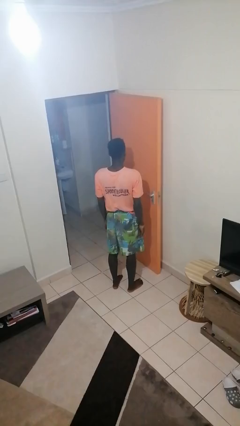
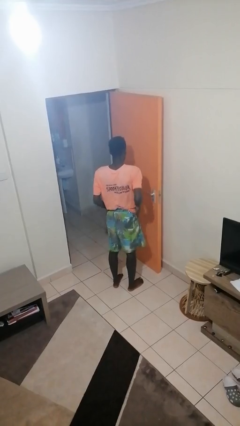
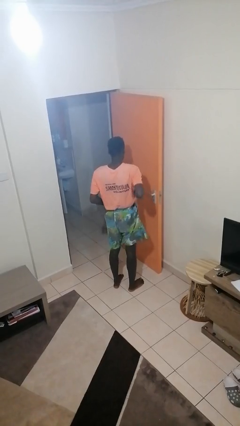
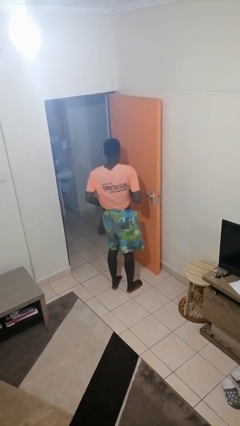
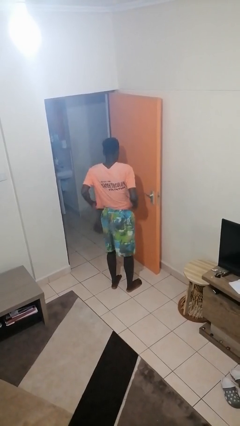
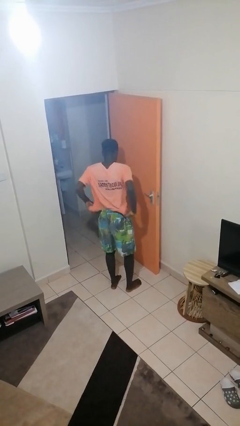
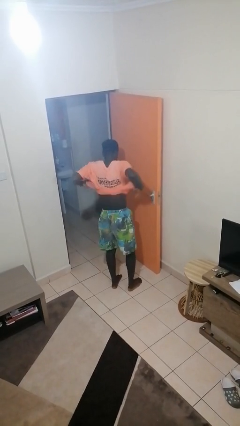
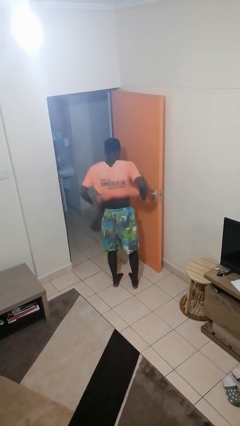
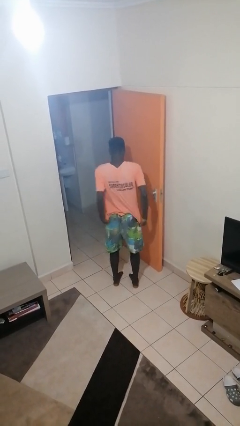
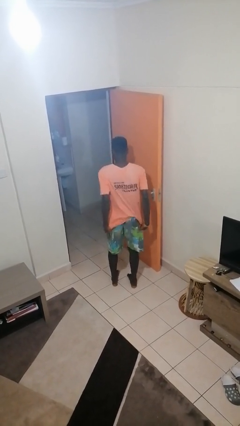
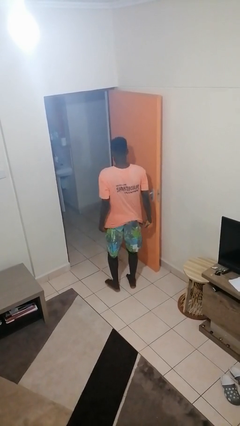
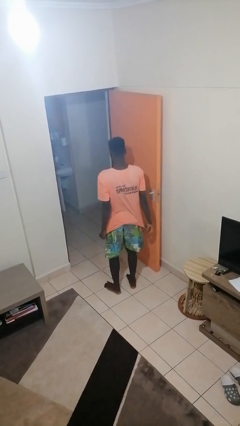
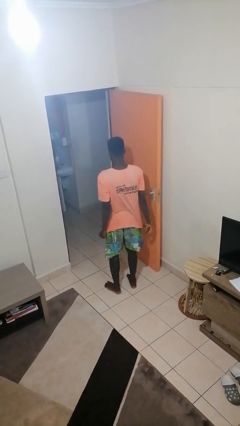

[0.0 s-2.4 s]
person untucks shirt

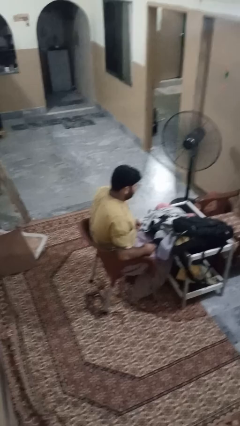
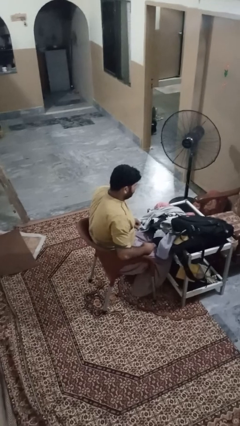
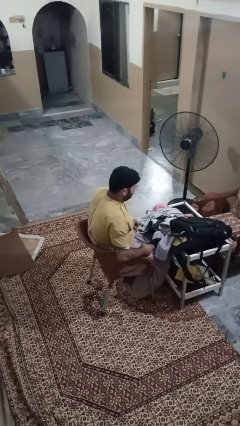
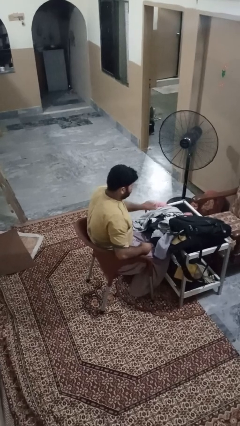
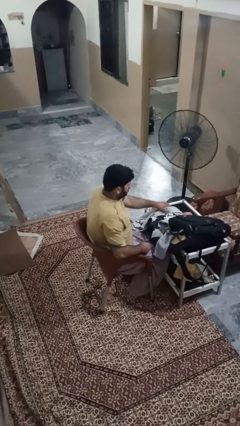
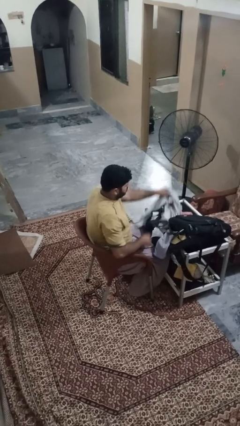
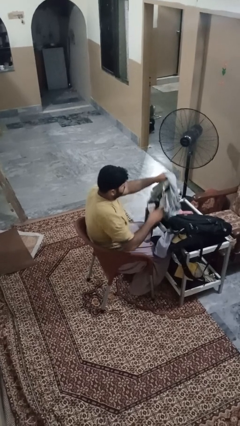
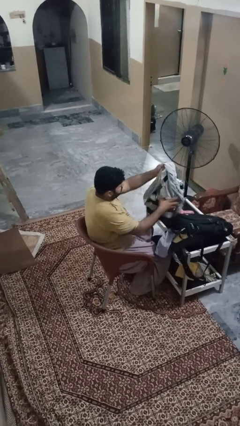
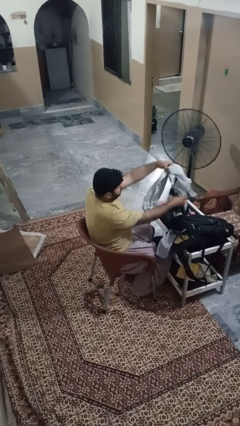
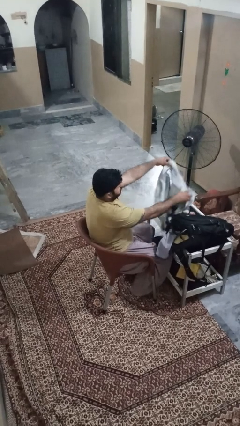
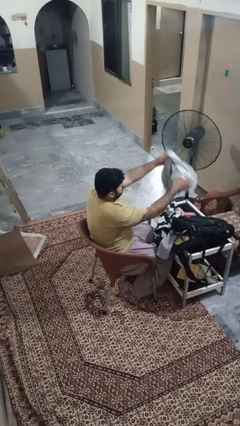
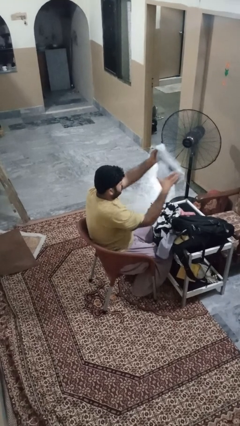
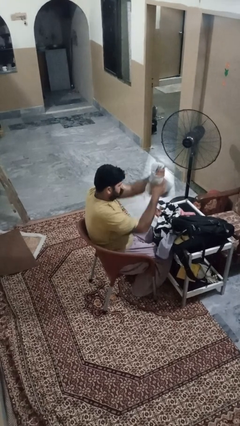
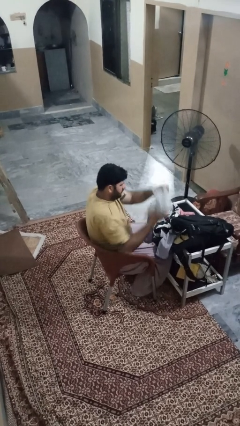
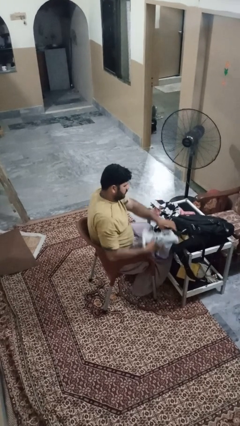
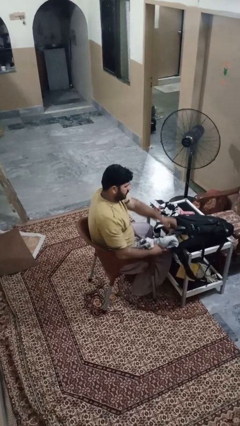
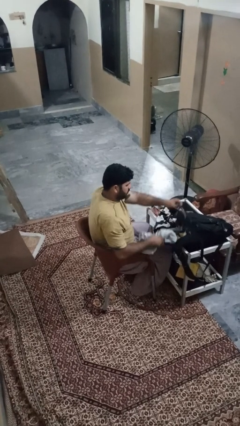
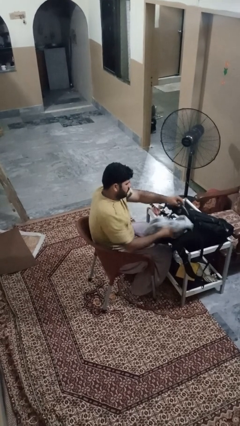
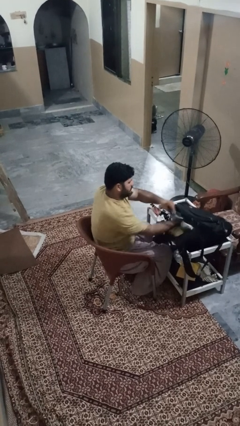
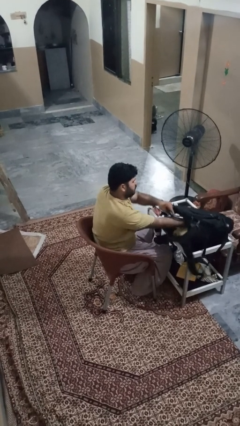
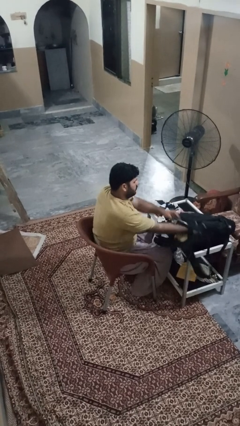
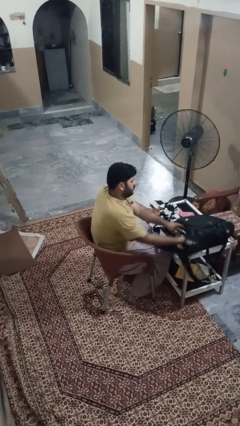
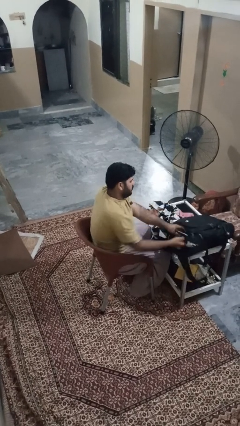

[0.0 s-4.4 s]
person loads clothes into suitcase

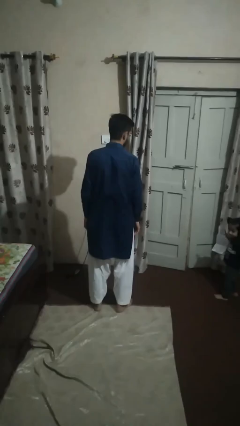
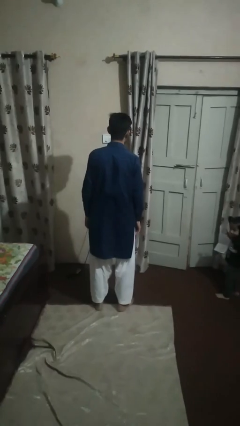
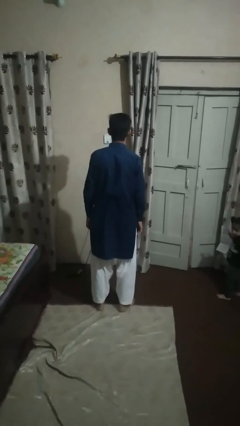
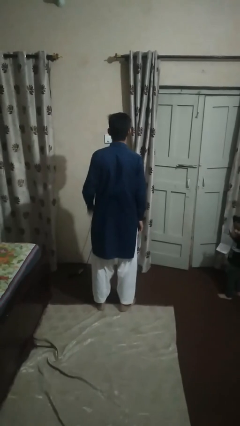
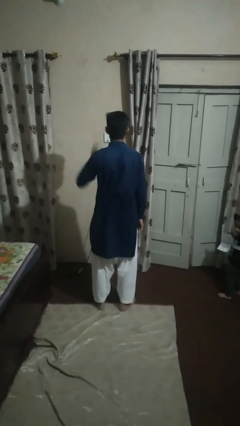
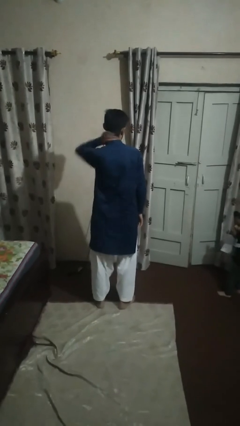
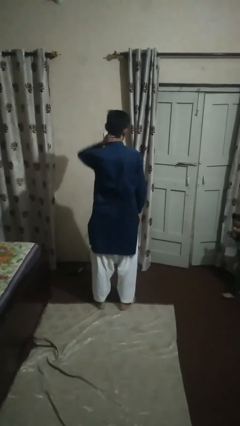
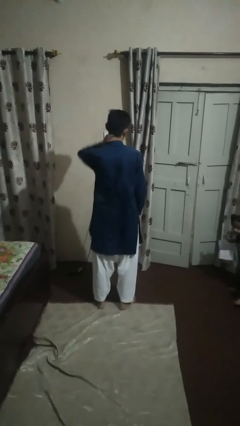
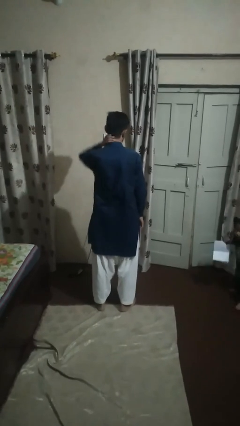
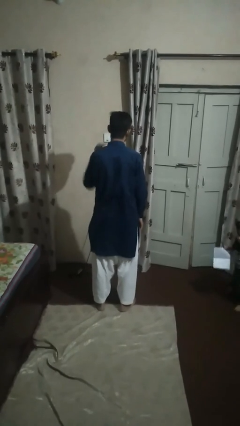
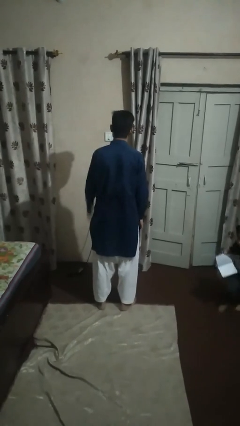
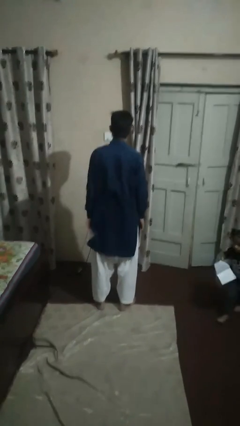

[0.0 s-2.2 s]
person rubs neck

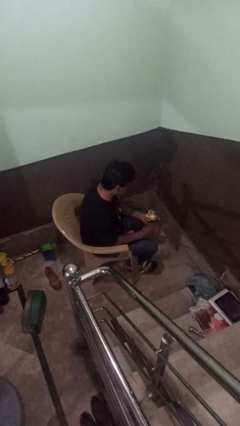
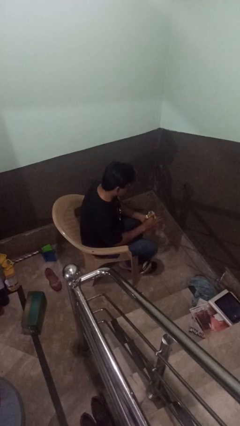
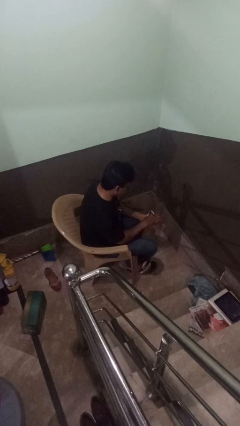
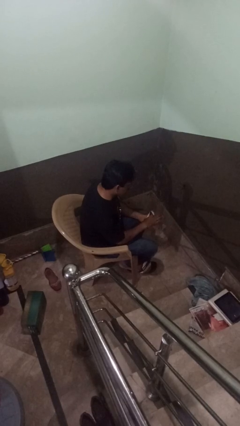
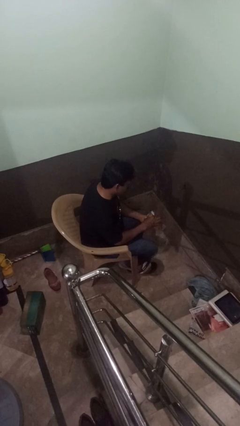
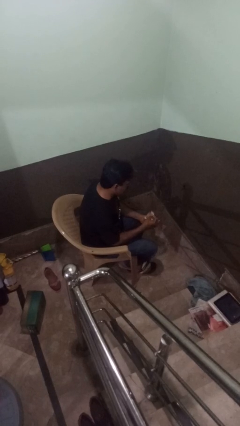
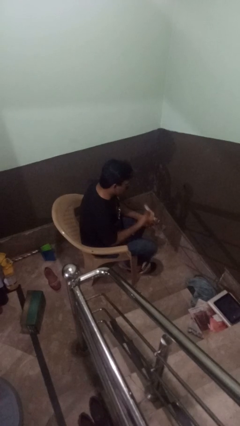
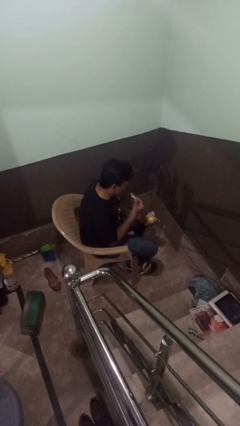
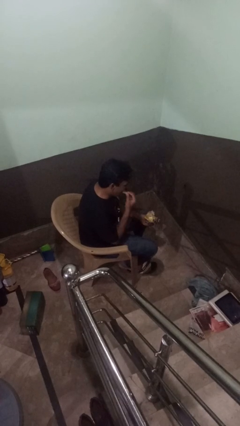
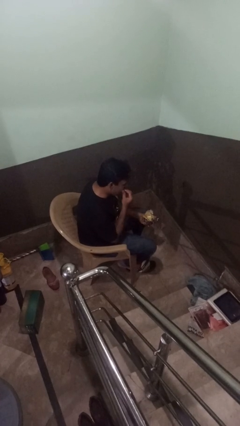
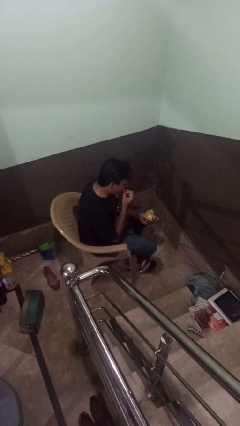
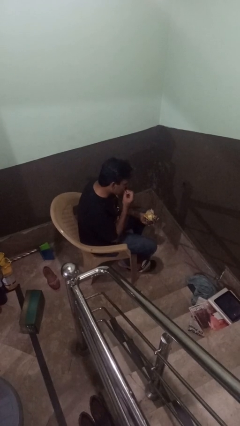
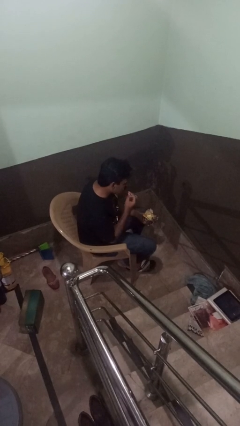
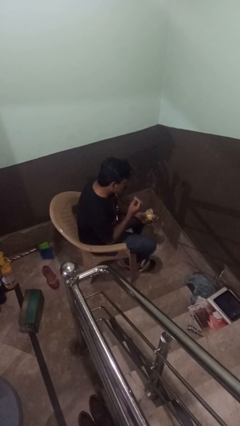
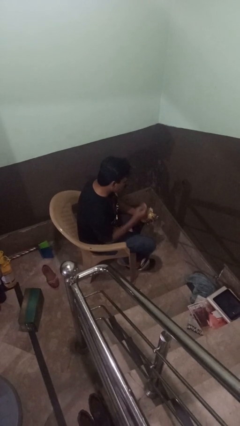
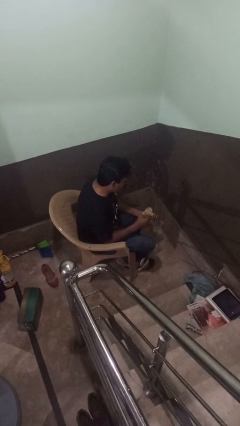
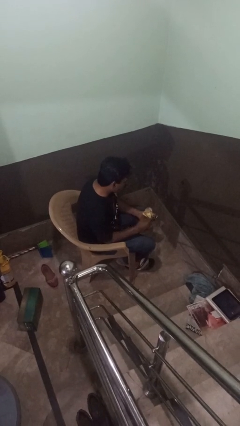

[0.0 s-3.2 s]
person eats snack from bag

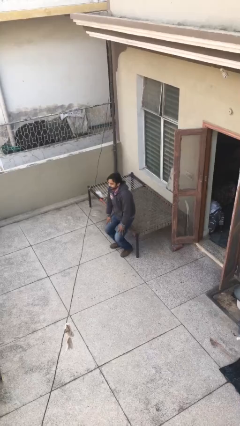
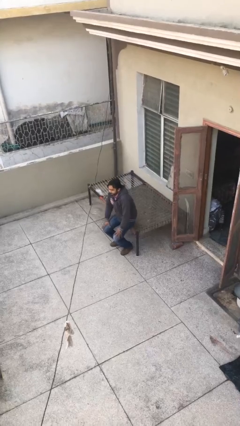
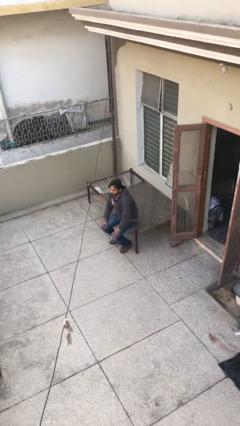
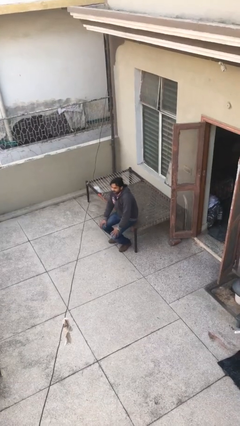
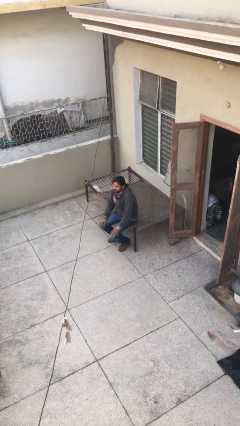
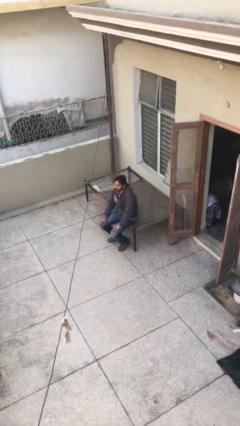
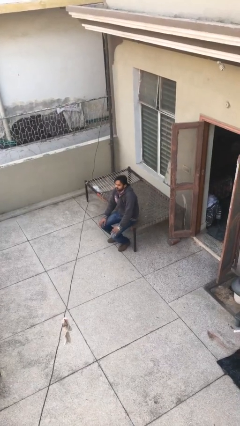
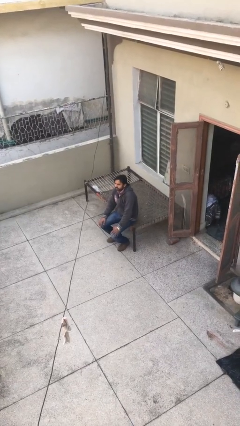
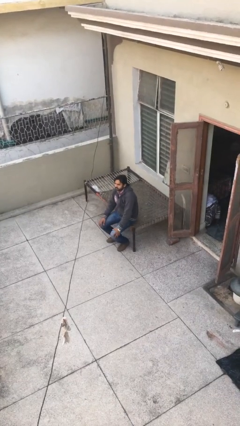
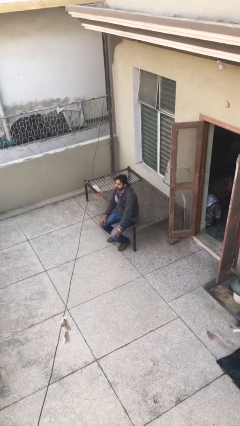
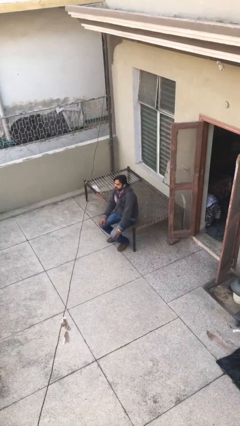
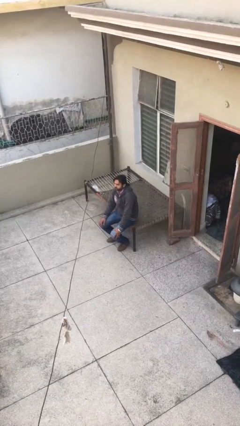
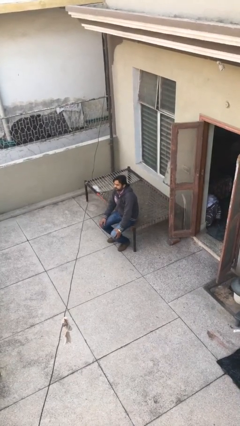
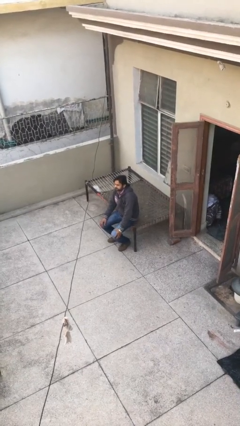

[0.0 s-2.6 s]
person sits down

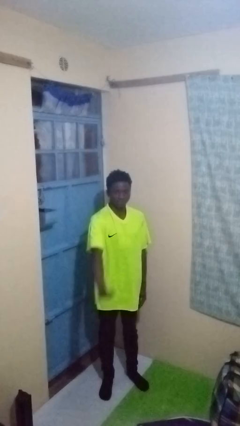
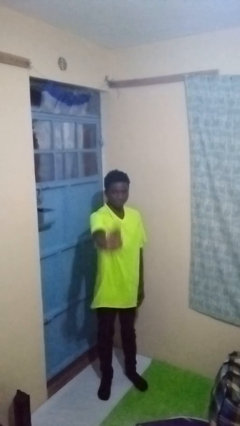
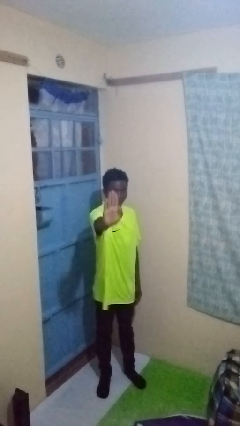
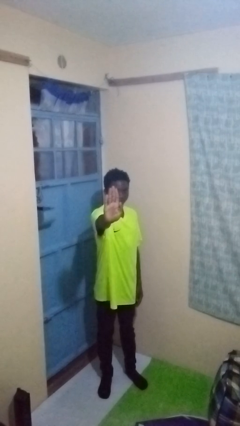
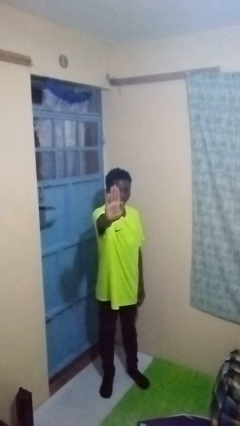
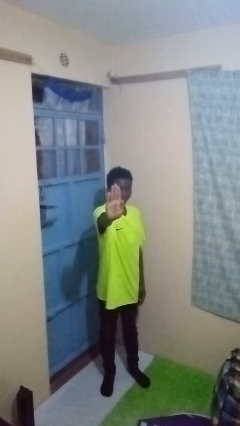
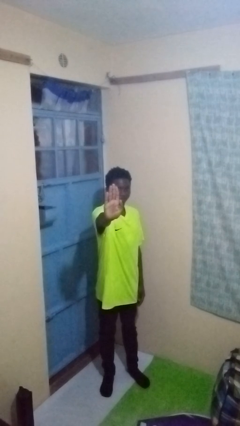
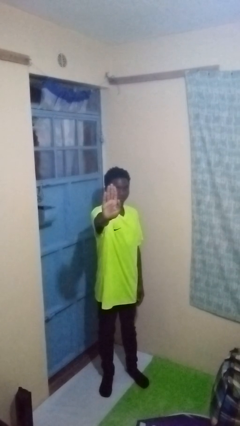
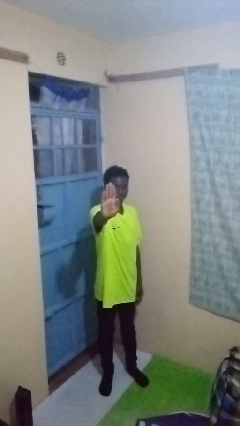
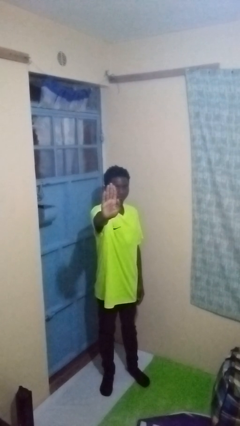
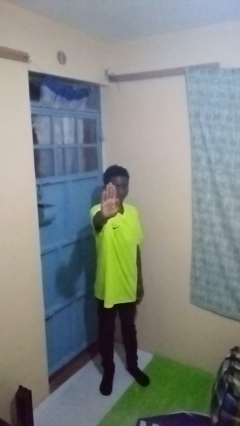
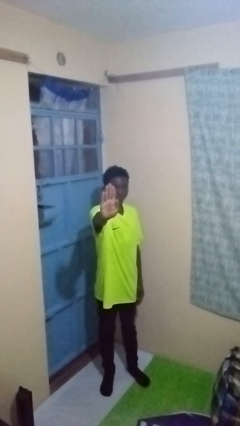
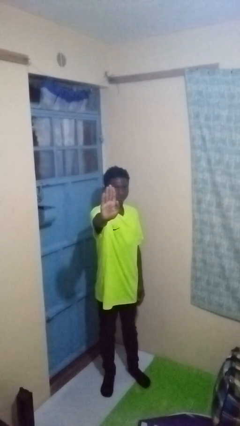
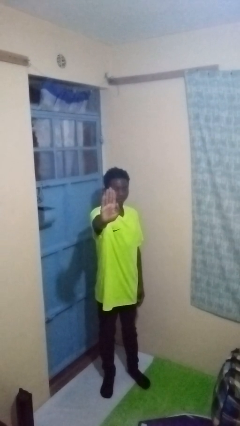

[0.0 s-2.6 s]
person gestures stop
